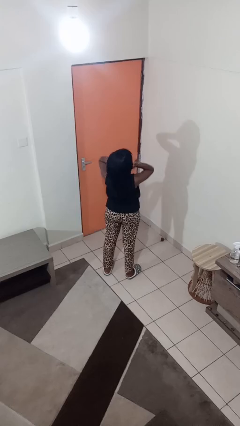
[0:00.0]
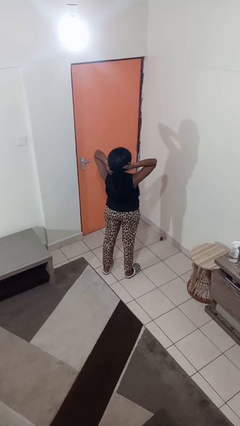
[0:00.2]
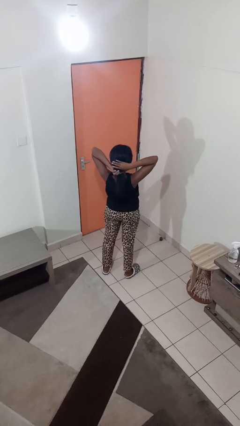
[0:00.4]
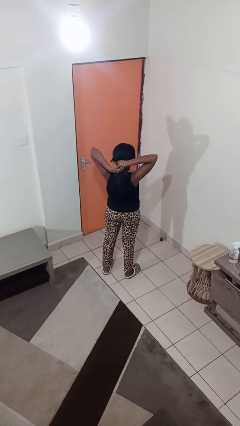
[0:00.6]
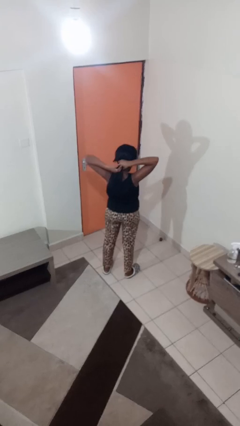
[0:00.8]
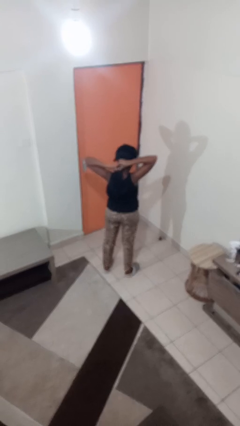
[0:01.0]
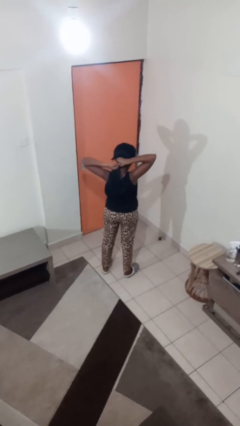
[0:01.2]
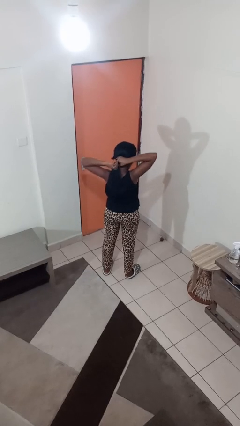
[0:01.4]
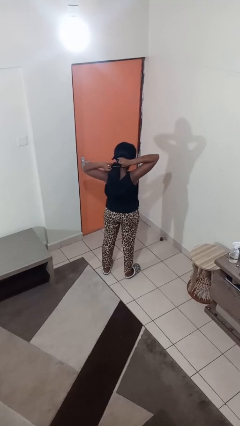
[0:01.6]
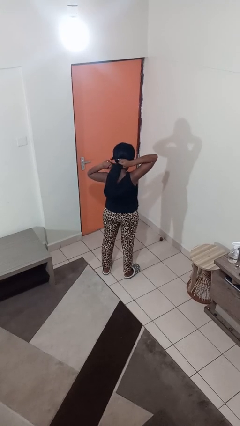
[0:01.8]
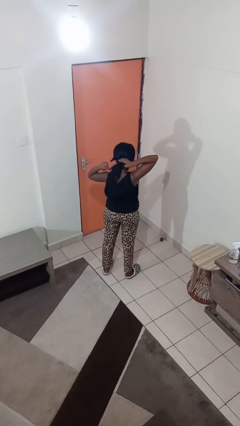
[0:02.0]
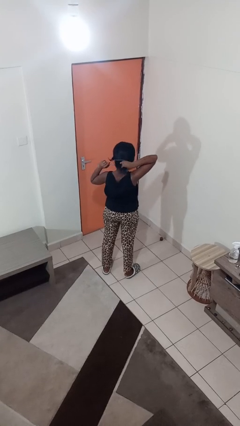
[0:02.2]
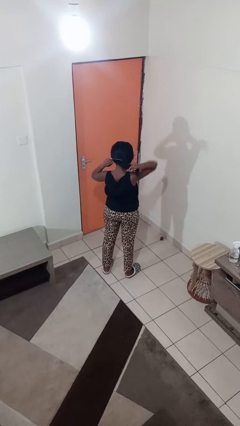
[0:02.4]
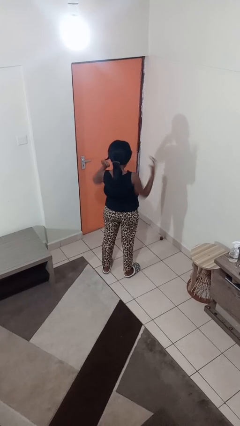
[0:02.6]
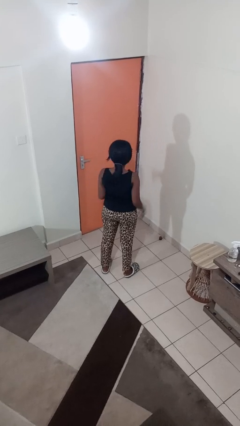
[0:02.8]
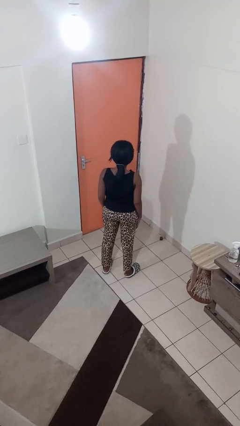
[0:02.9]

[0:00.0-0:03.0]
person puts hair in ponytail

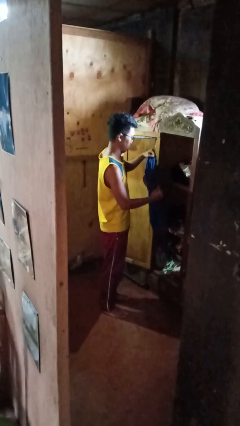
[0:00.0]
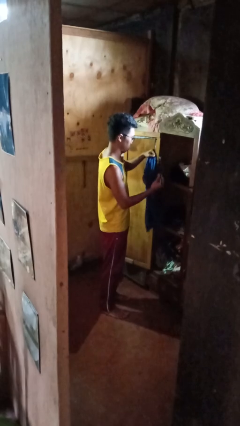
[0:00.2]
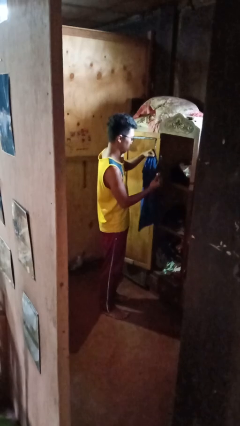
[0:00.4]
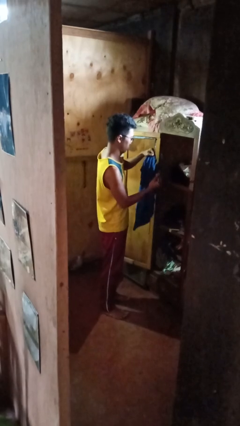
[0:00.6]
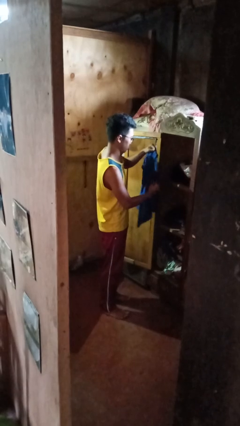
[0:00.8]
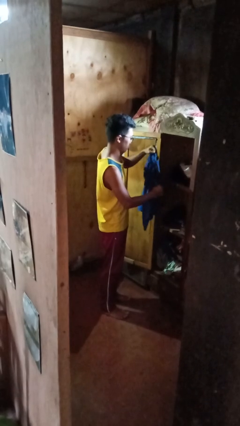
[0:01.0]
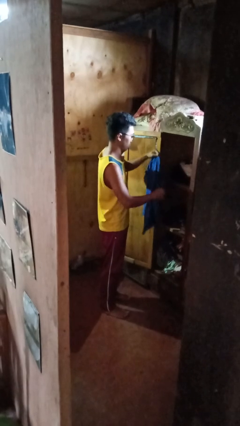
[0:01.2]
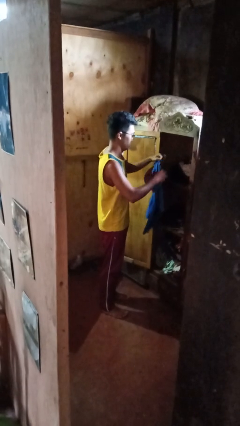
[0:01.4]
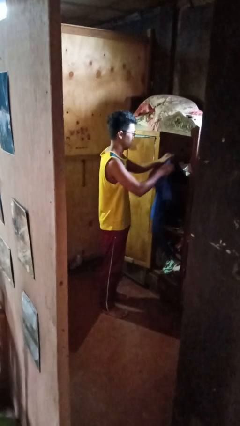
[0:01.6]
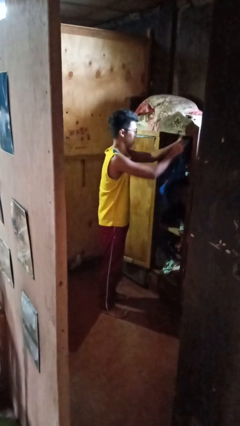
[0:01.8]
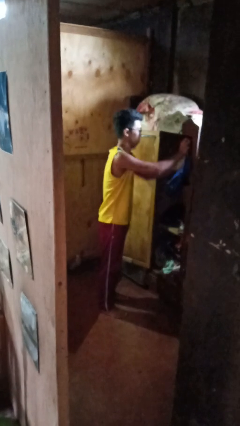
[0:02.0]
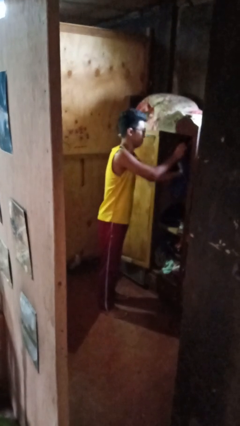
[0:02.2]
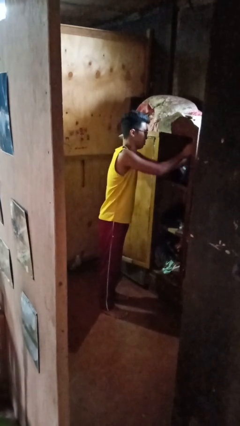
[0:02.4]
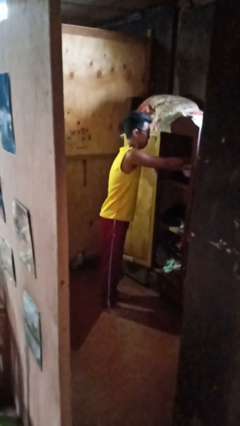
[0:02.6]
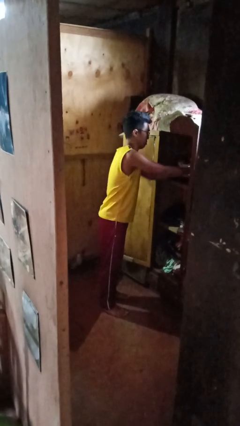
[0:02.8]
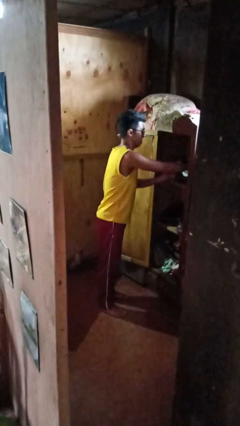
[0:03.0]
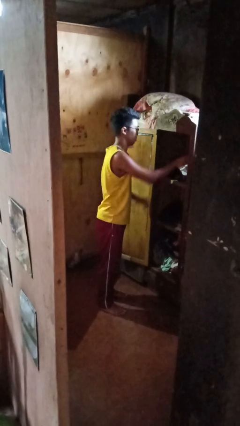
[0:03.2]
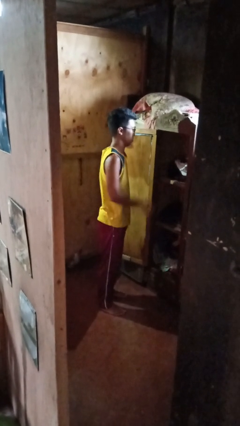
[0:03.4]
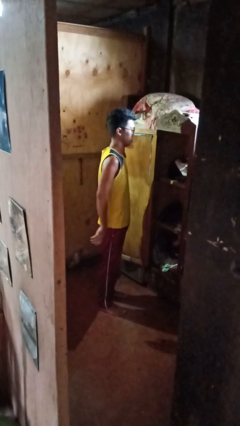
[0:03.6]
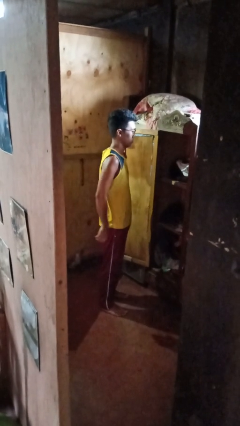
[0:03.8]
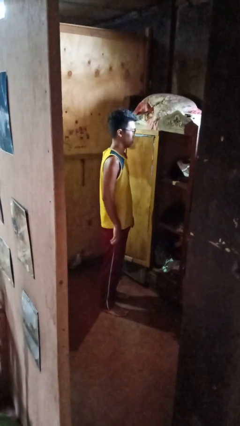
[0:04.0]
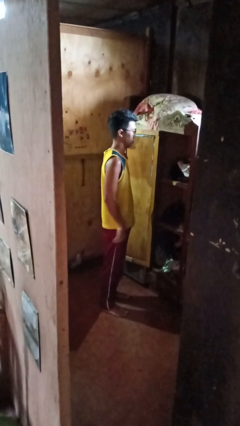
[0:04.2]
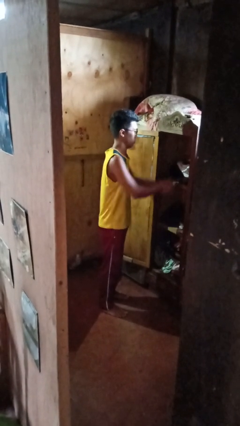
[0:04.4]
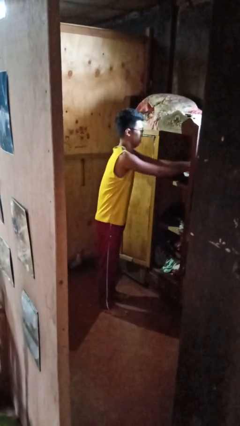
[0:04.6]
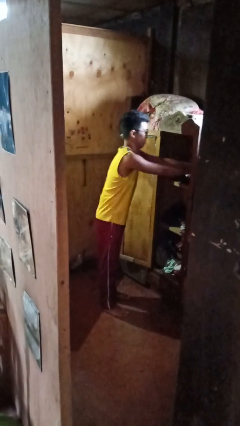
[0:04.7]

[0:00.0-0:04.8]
person puts clothes into closet

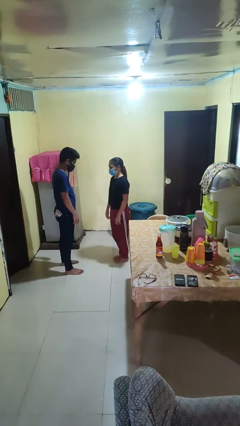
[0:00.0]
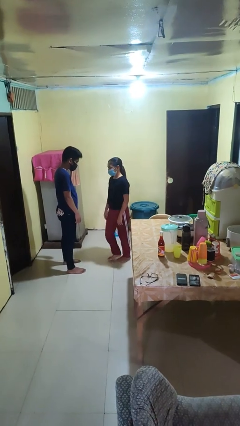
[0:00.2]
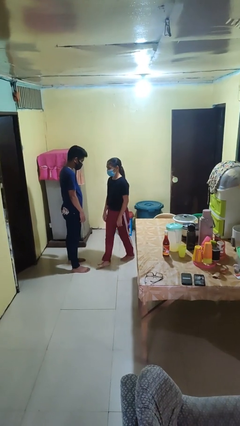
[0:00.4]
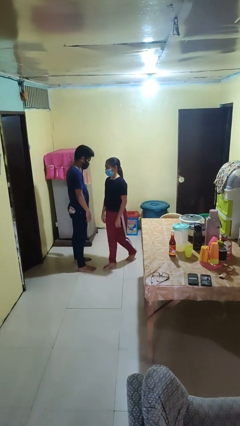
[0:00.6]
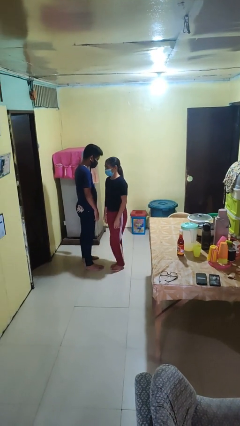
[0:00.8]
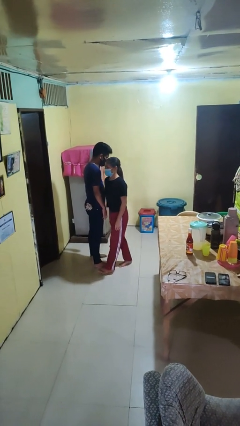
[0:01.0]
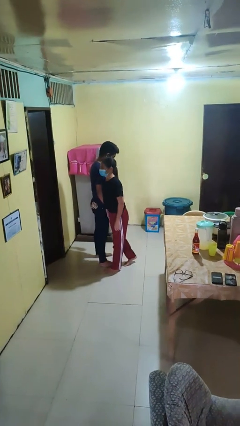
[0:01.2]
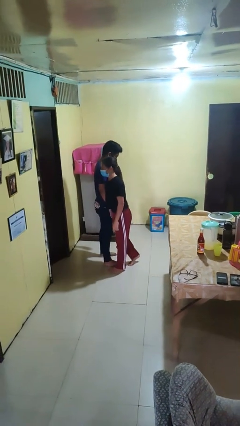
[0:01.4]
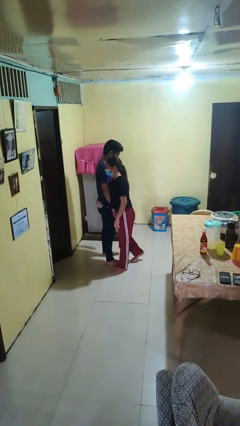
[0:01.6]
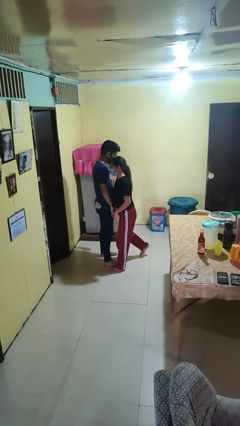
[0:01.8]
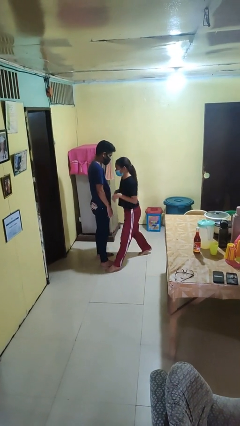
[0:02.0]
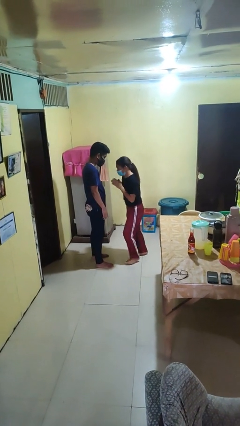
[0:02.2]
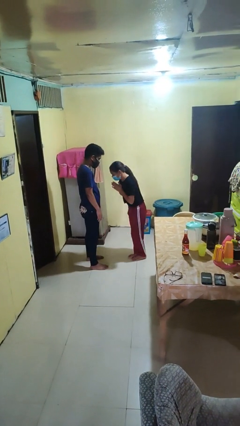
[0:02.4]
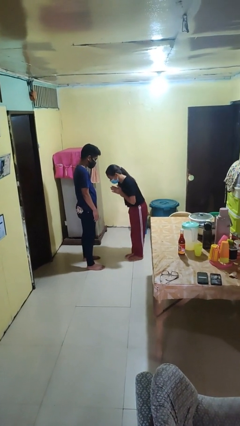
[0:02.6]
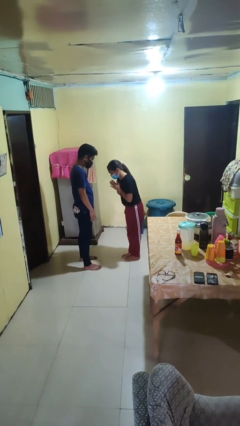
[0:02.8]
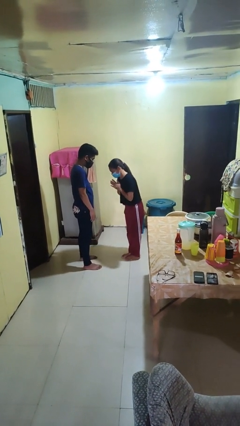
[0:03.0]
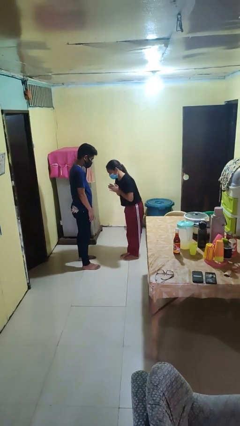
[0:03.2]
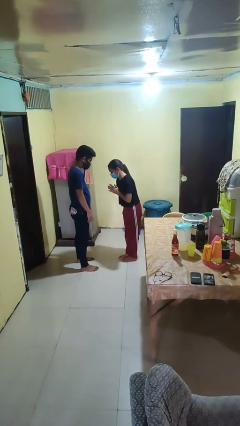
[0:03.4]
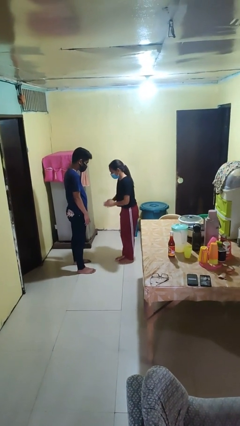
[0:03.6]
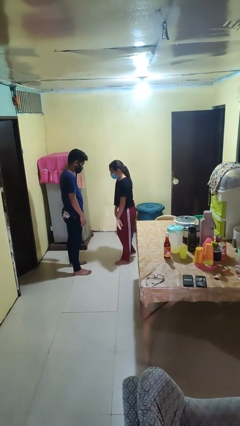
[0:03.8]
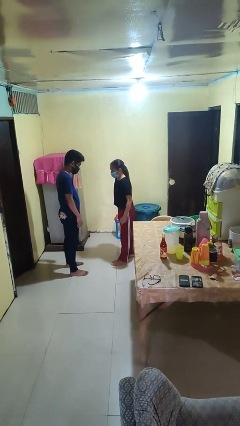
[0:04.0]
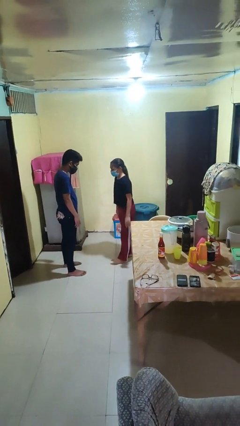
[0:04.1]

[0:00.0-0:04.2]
person bumps into person

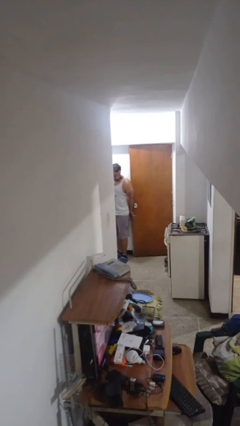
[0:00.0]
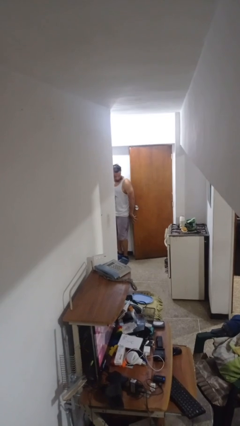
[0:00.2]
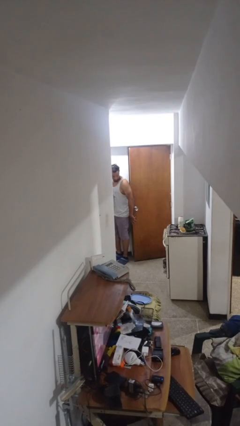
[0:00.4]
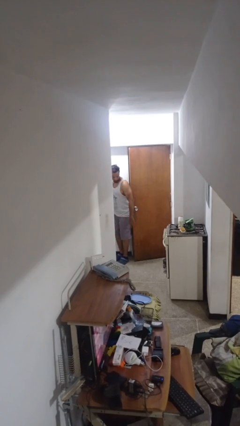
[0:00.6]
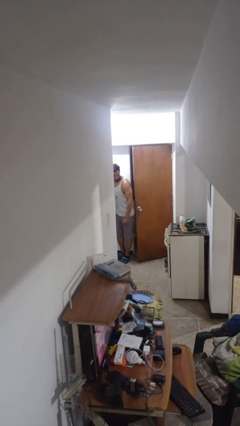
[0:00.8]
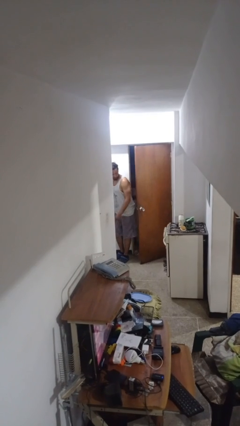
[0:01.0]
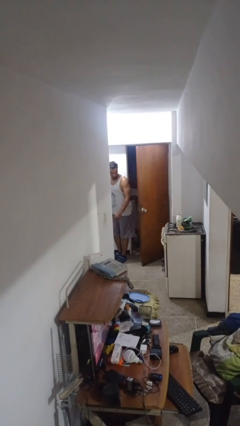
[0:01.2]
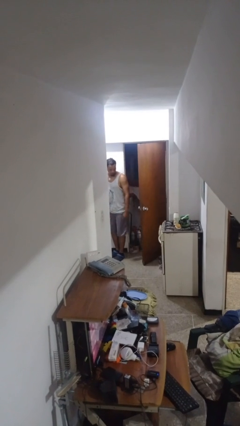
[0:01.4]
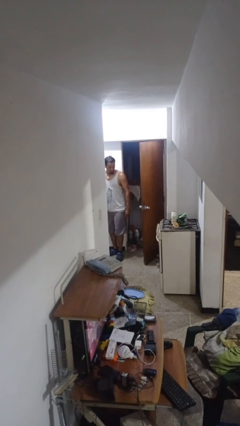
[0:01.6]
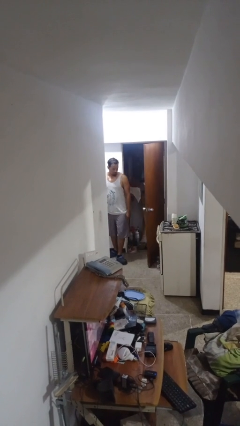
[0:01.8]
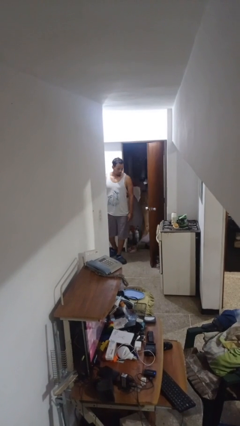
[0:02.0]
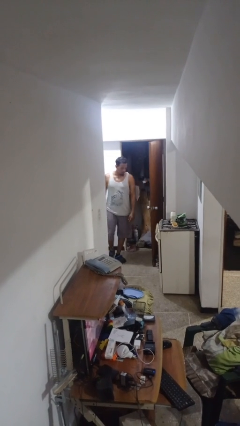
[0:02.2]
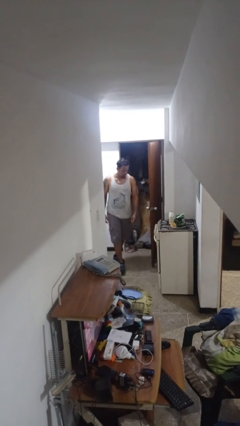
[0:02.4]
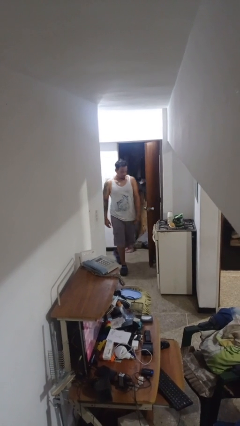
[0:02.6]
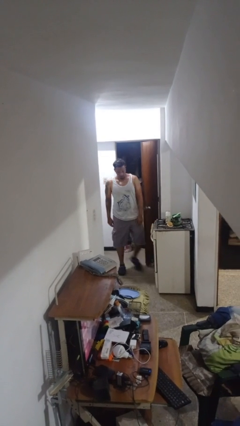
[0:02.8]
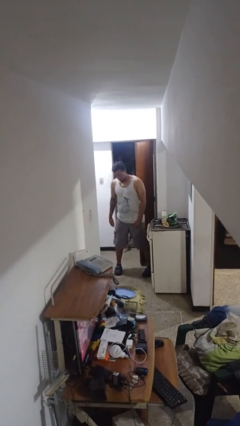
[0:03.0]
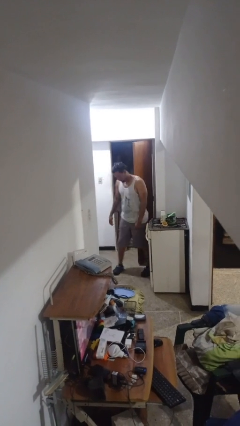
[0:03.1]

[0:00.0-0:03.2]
person opens facility door

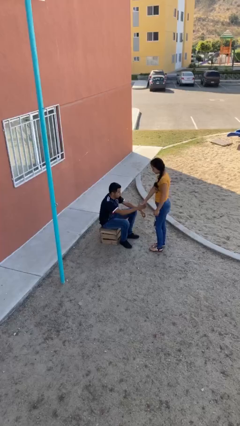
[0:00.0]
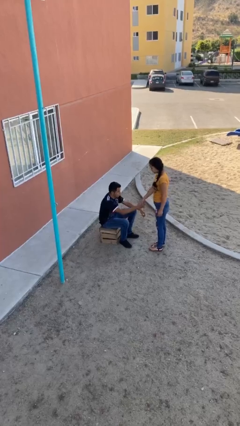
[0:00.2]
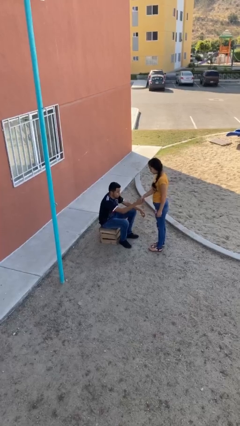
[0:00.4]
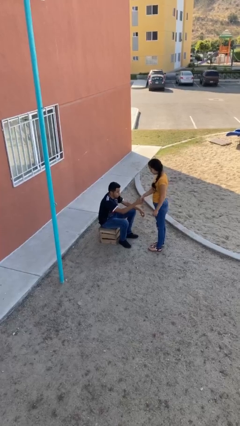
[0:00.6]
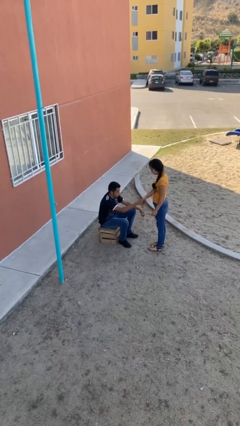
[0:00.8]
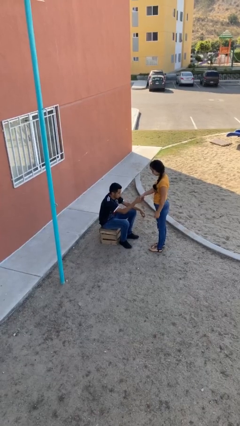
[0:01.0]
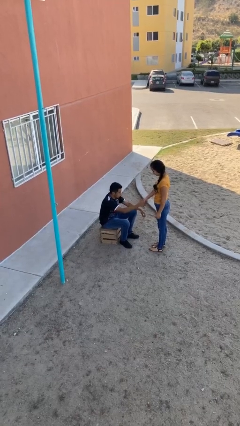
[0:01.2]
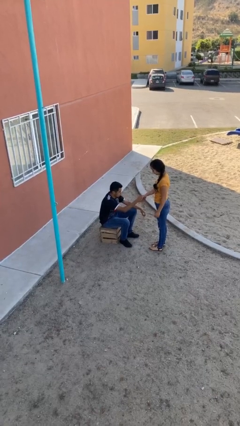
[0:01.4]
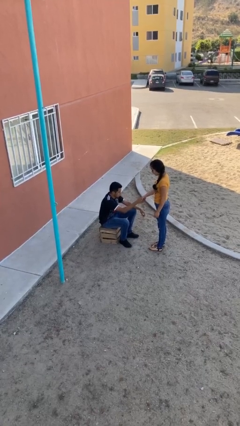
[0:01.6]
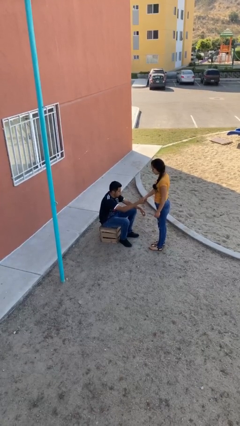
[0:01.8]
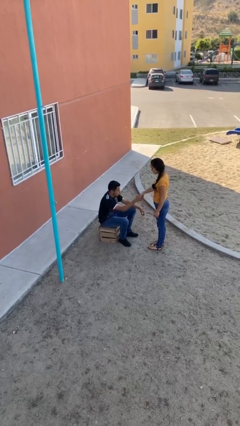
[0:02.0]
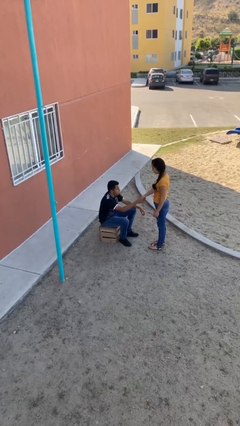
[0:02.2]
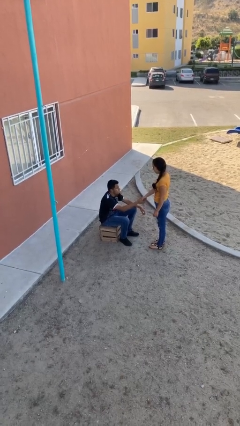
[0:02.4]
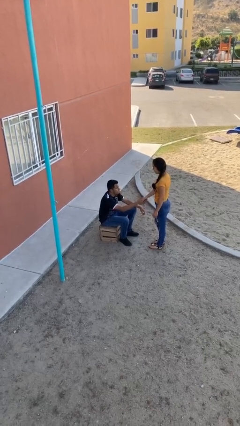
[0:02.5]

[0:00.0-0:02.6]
person shakes hand
